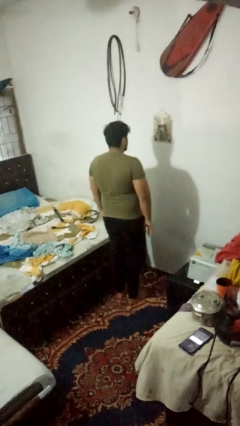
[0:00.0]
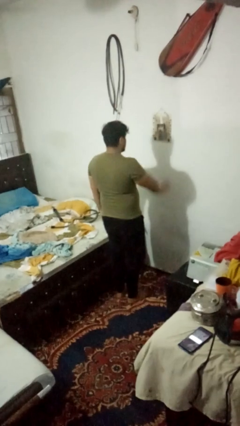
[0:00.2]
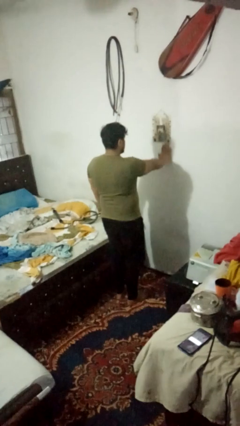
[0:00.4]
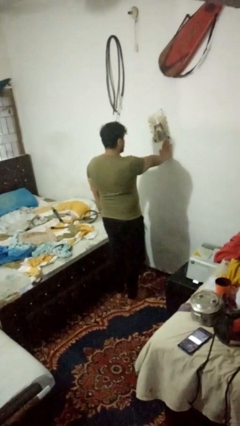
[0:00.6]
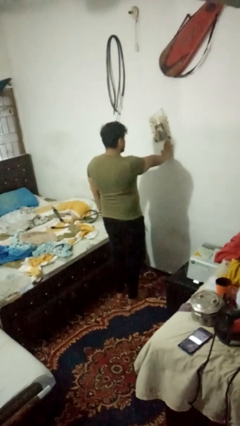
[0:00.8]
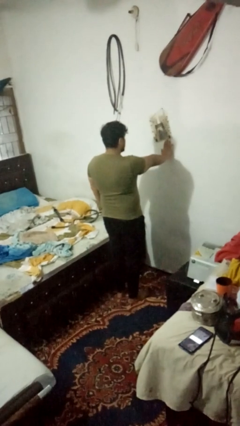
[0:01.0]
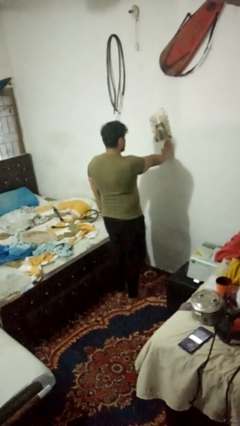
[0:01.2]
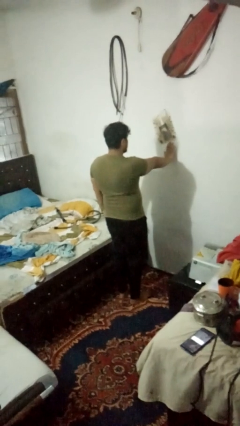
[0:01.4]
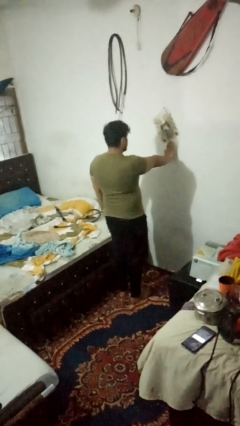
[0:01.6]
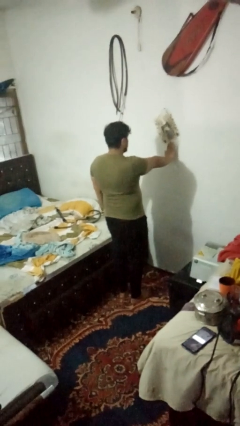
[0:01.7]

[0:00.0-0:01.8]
person gestures stop

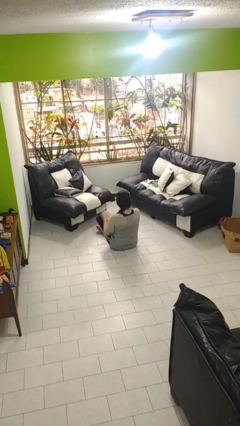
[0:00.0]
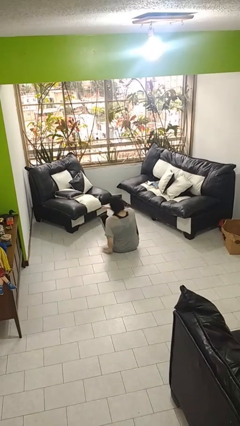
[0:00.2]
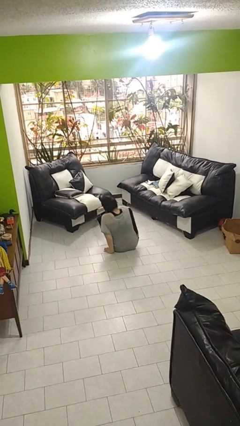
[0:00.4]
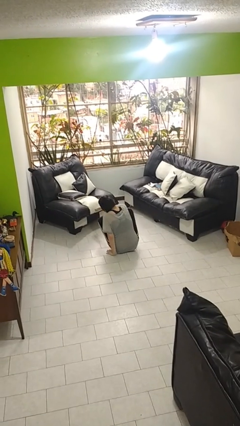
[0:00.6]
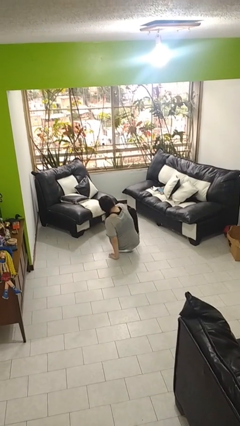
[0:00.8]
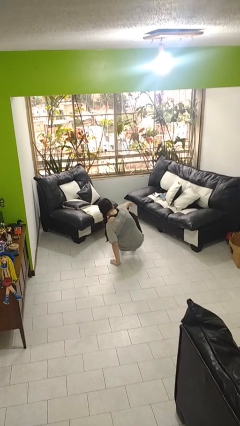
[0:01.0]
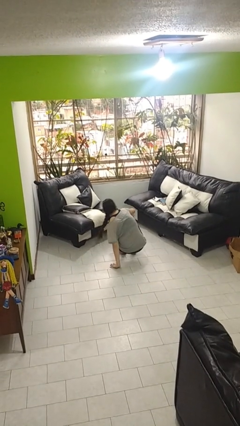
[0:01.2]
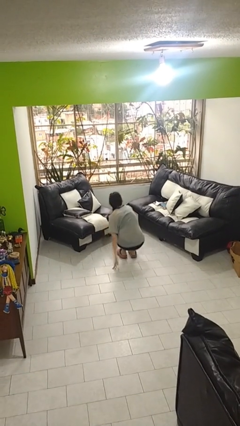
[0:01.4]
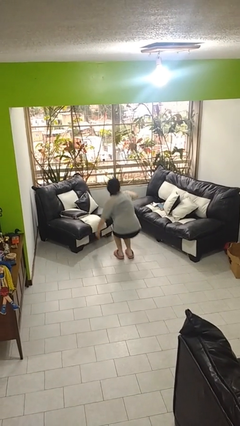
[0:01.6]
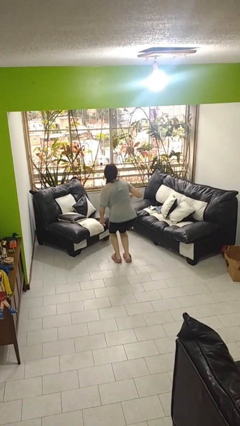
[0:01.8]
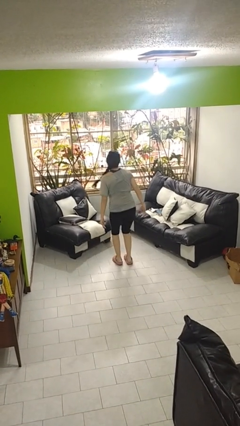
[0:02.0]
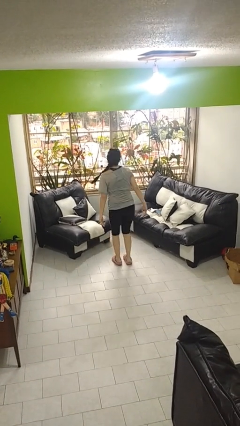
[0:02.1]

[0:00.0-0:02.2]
person stands up from floor

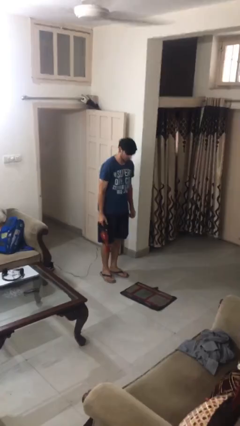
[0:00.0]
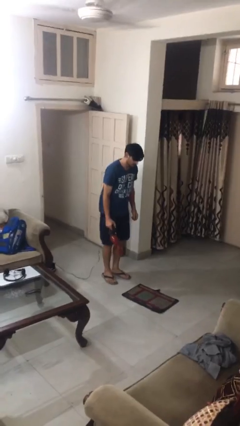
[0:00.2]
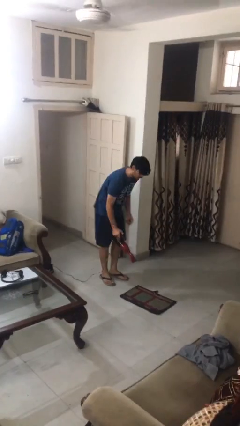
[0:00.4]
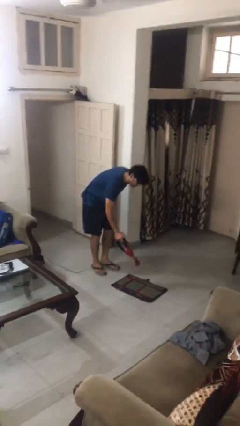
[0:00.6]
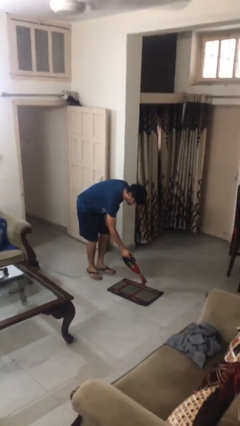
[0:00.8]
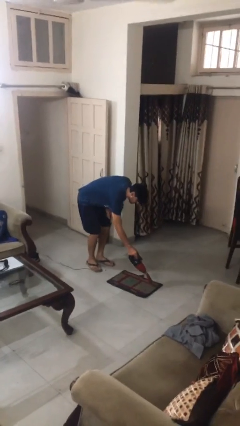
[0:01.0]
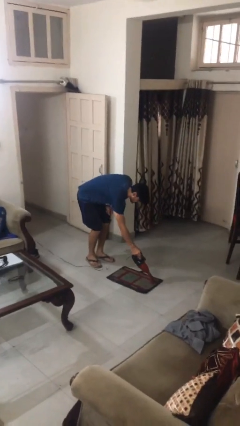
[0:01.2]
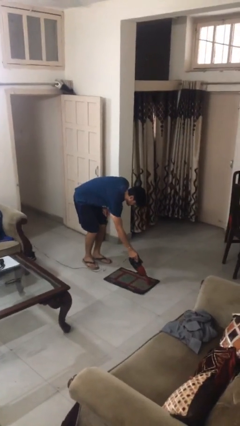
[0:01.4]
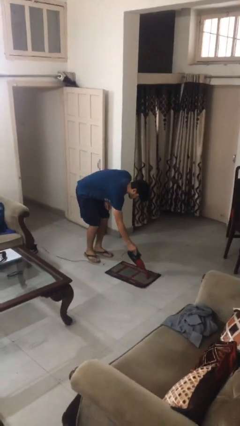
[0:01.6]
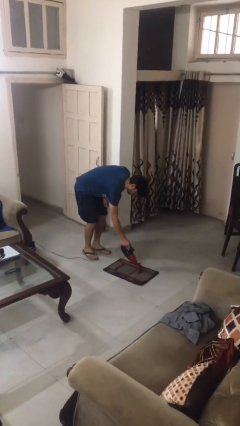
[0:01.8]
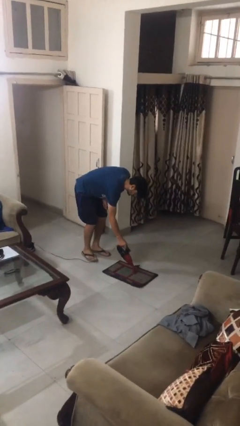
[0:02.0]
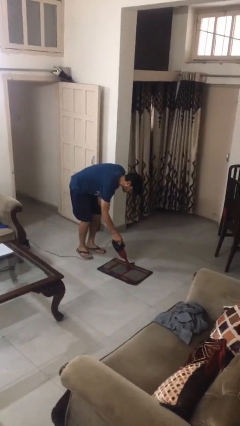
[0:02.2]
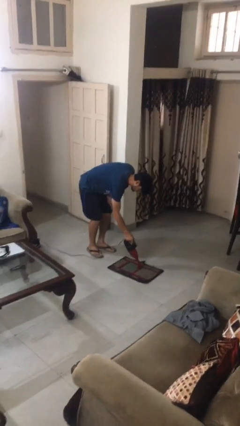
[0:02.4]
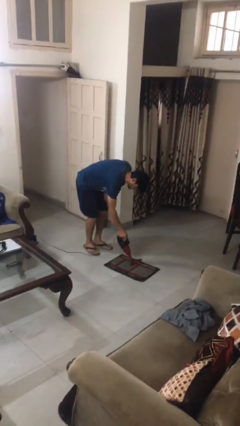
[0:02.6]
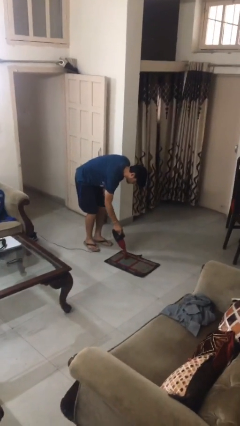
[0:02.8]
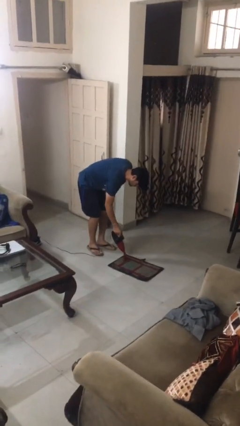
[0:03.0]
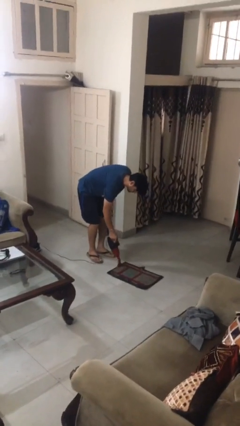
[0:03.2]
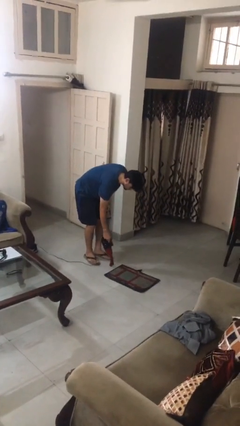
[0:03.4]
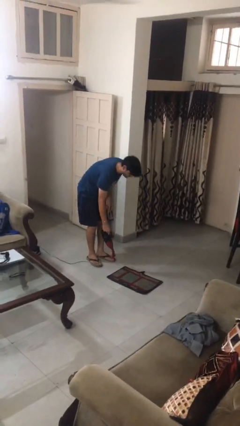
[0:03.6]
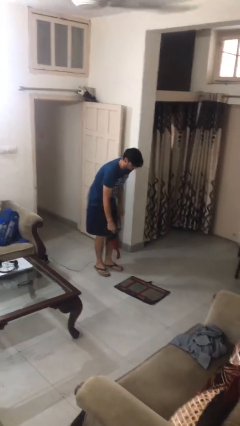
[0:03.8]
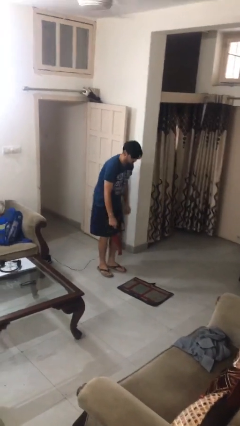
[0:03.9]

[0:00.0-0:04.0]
person vacuums carpet

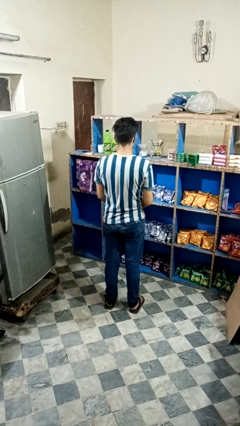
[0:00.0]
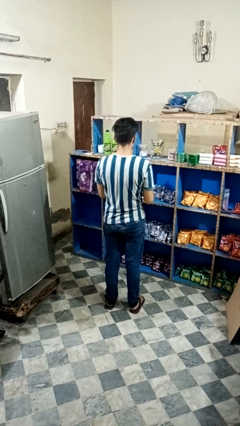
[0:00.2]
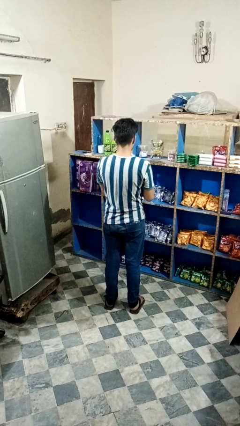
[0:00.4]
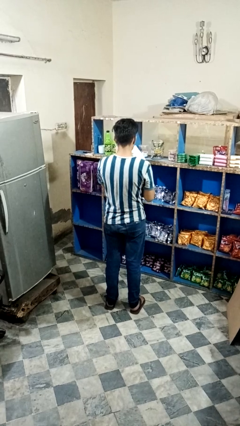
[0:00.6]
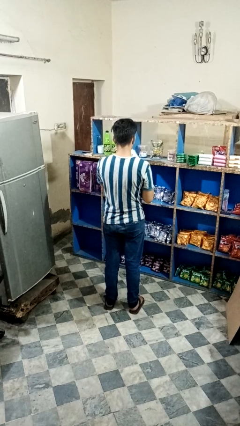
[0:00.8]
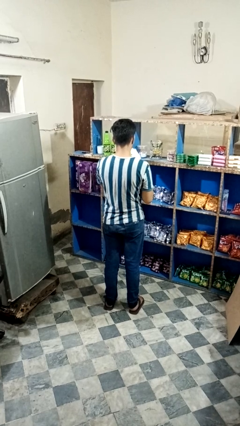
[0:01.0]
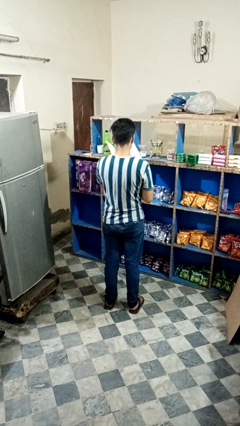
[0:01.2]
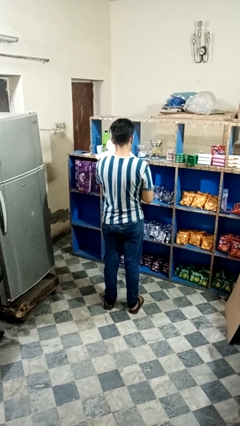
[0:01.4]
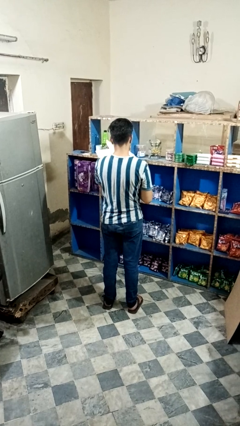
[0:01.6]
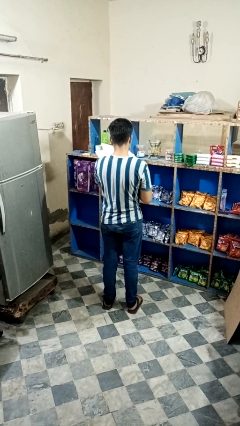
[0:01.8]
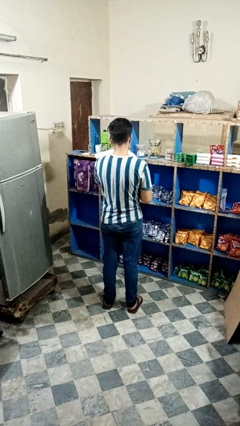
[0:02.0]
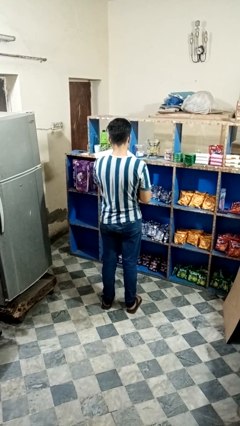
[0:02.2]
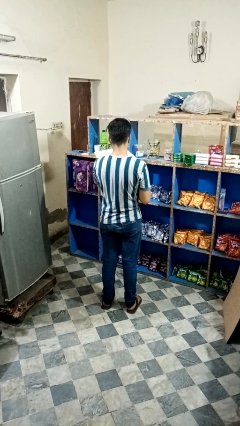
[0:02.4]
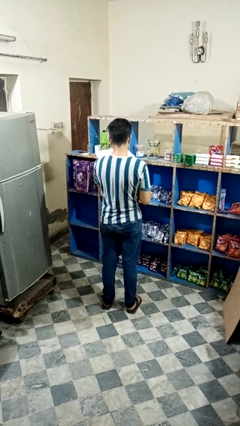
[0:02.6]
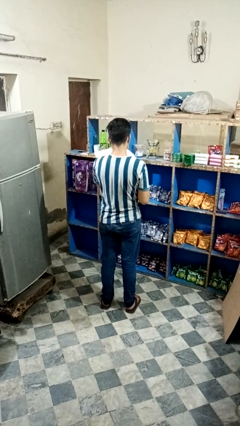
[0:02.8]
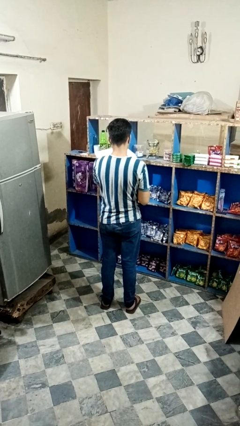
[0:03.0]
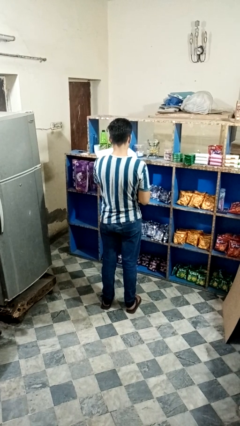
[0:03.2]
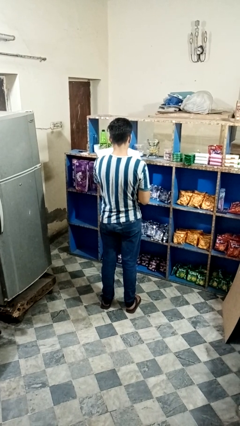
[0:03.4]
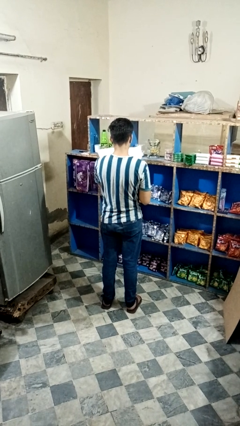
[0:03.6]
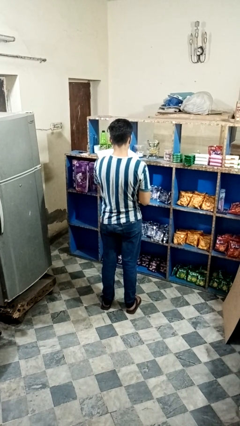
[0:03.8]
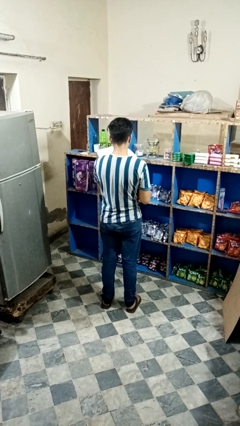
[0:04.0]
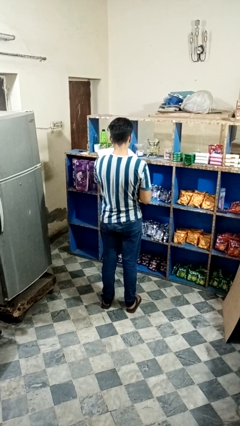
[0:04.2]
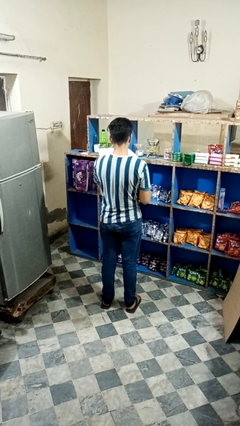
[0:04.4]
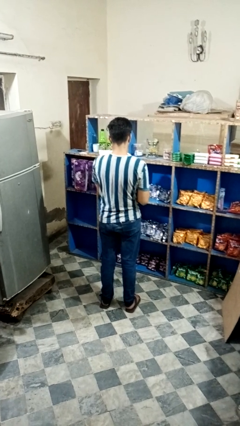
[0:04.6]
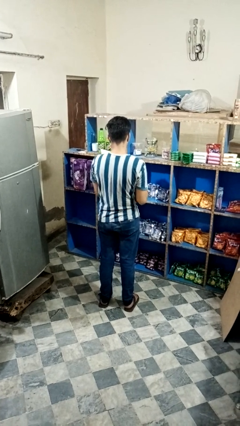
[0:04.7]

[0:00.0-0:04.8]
person reads magazine

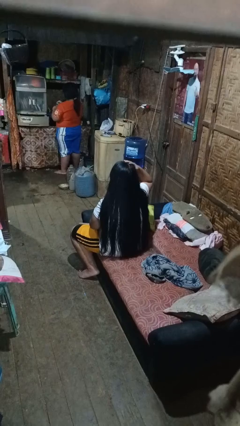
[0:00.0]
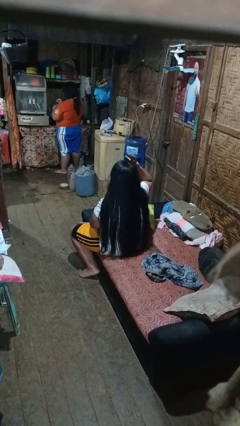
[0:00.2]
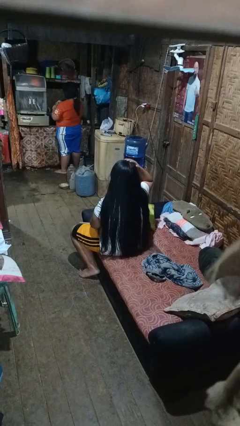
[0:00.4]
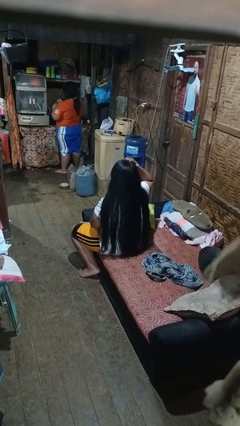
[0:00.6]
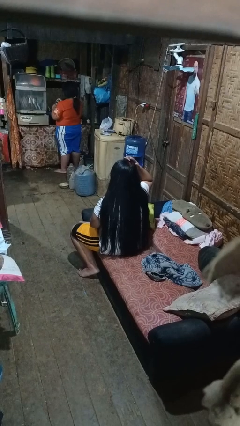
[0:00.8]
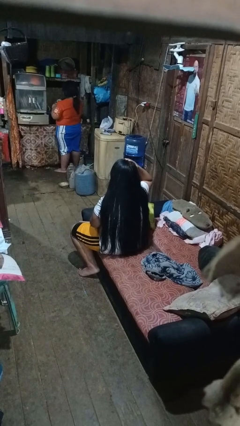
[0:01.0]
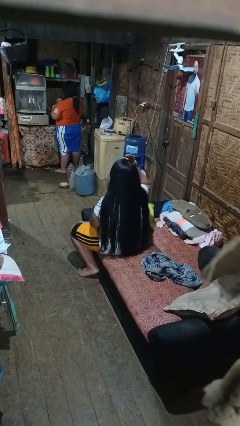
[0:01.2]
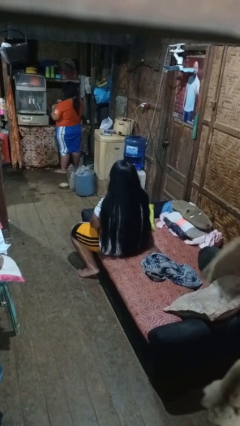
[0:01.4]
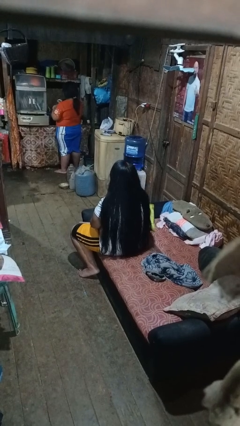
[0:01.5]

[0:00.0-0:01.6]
person pats head

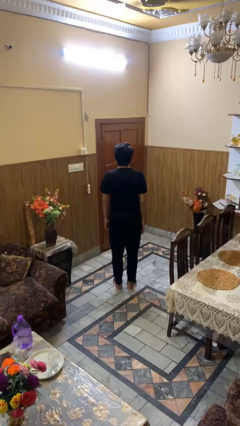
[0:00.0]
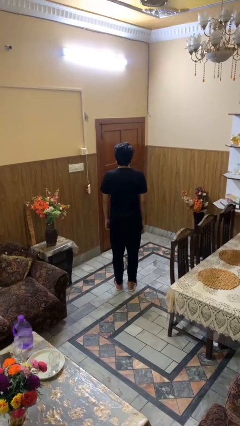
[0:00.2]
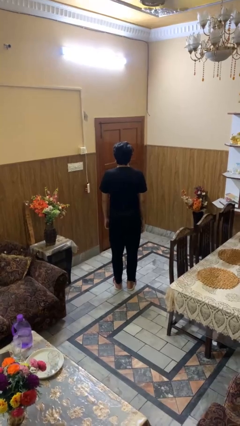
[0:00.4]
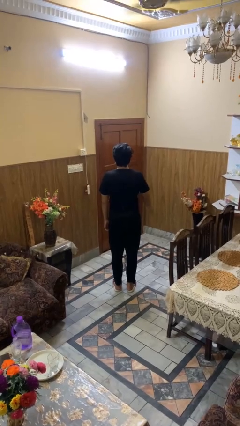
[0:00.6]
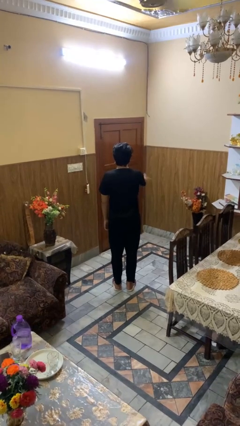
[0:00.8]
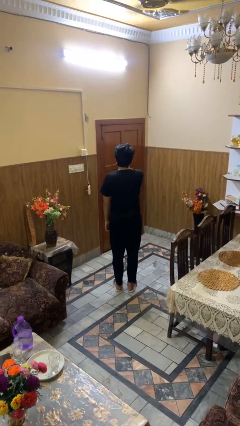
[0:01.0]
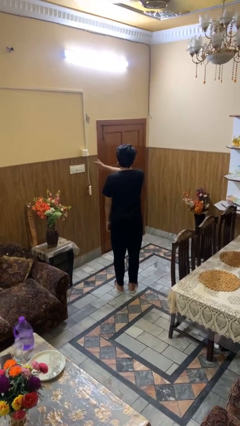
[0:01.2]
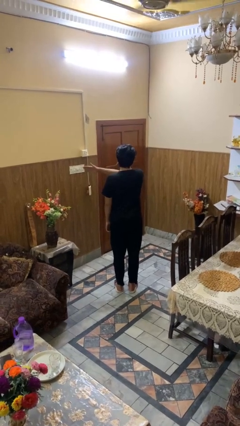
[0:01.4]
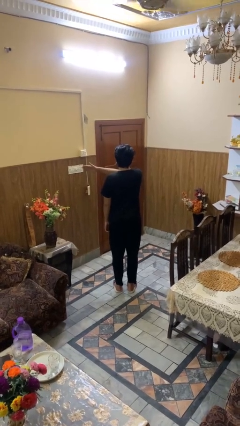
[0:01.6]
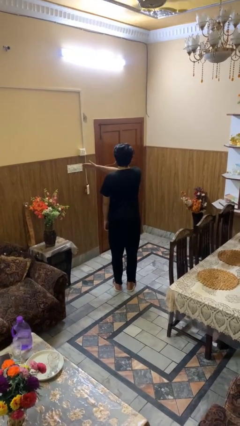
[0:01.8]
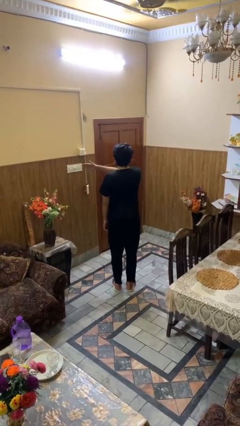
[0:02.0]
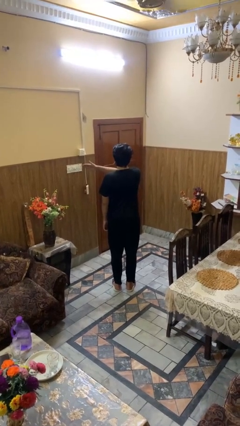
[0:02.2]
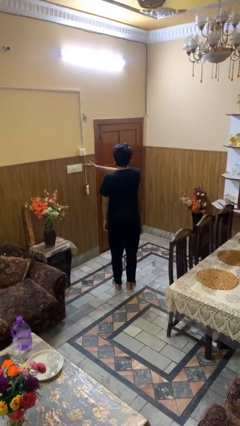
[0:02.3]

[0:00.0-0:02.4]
person gestures swipe left

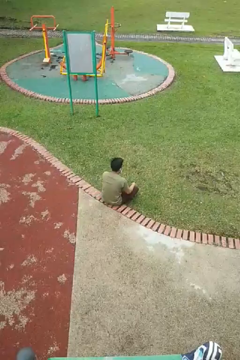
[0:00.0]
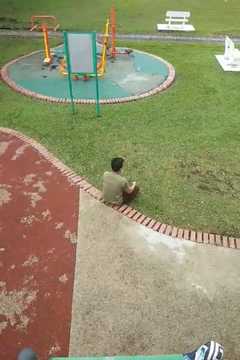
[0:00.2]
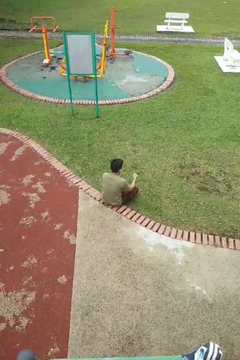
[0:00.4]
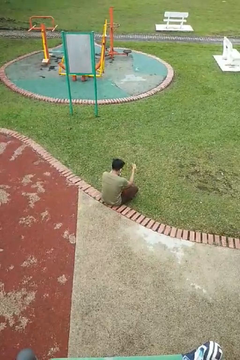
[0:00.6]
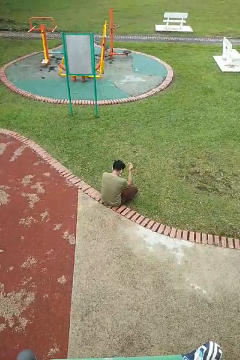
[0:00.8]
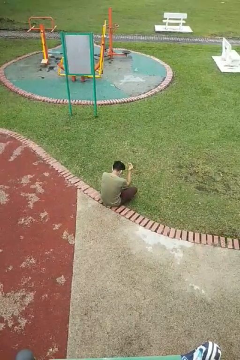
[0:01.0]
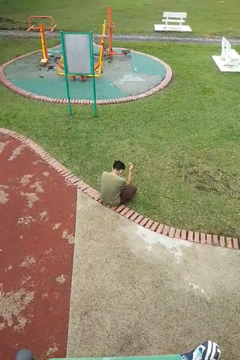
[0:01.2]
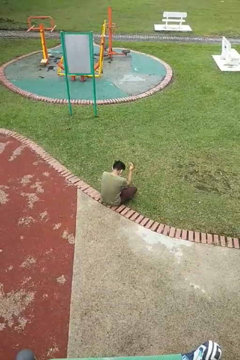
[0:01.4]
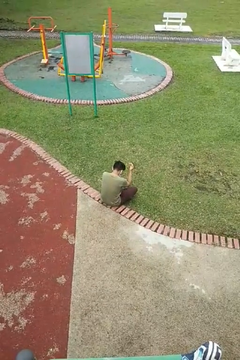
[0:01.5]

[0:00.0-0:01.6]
person prays
